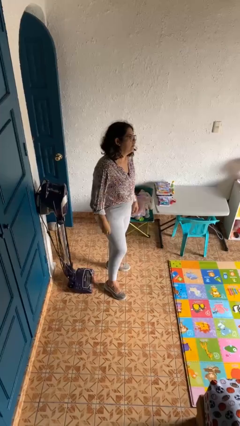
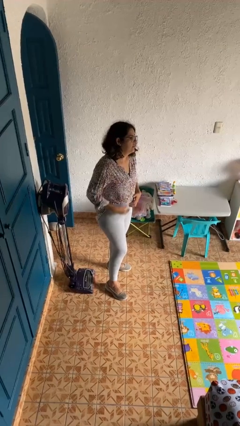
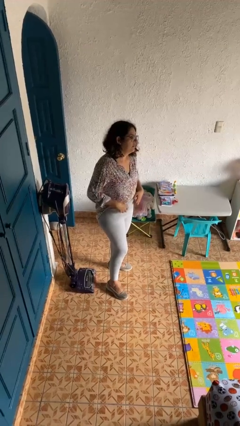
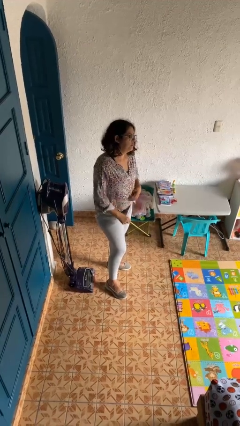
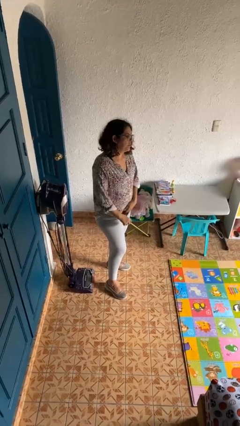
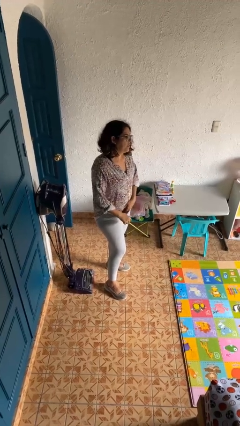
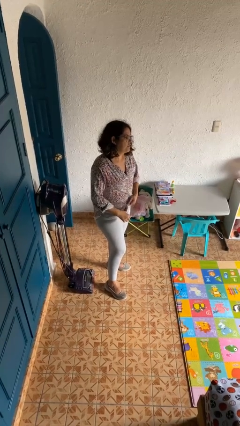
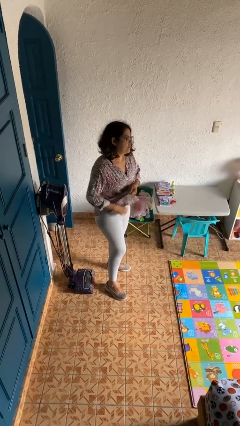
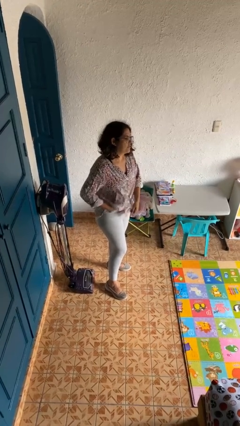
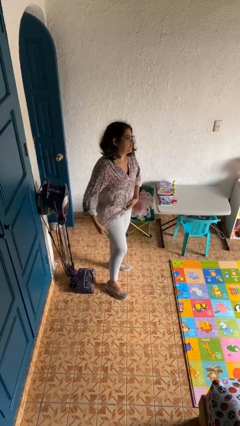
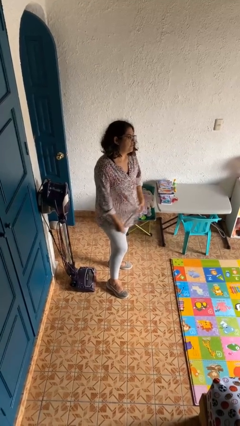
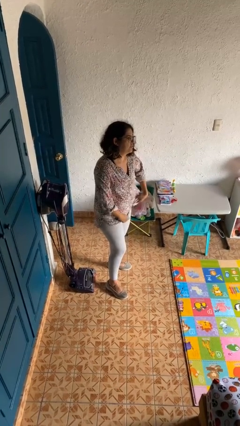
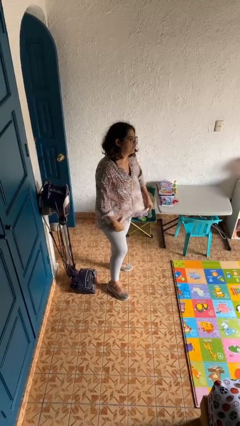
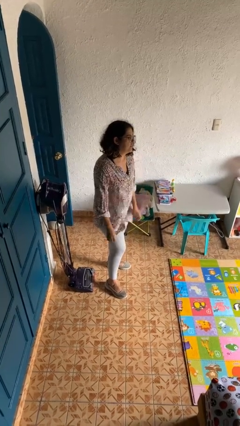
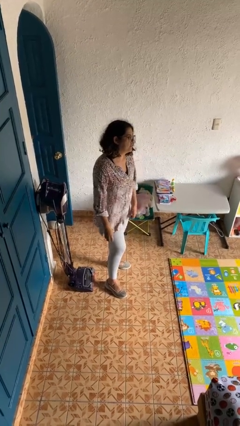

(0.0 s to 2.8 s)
person untucks shirt

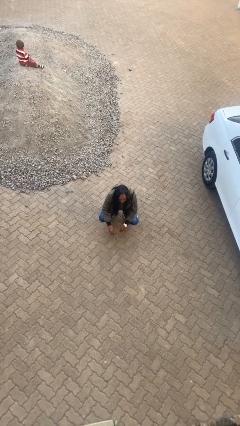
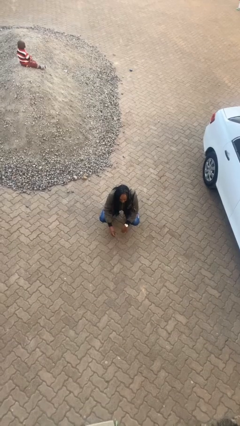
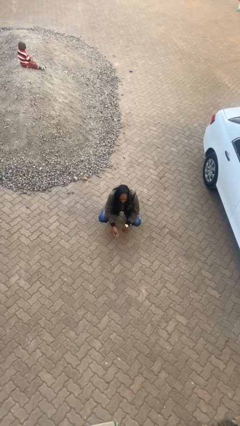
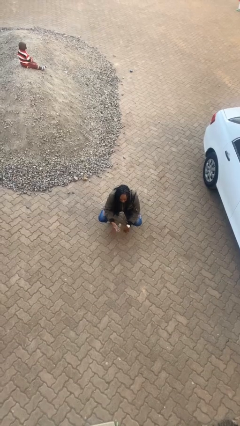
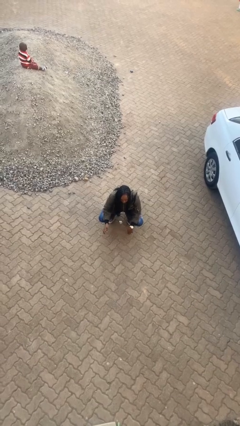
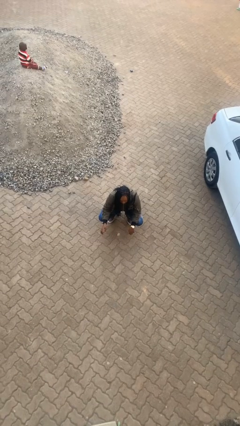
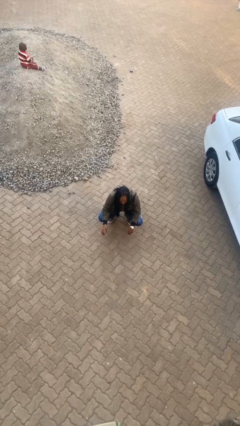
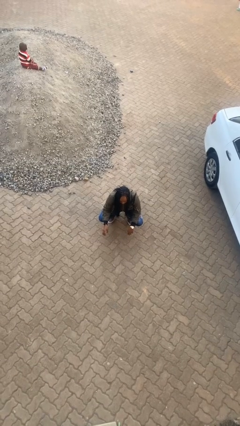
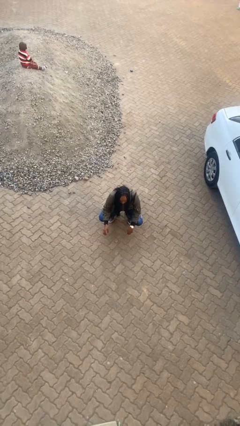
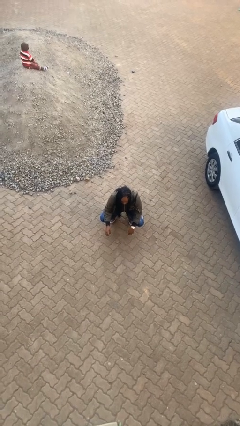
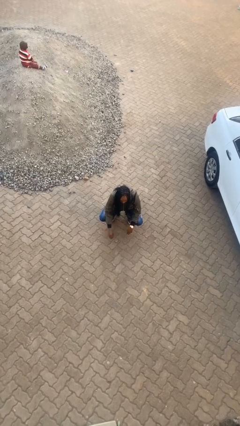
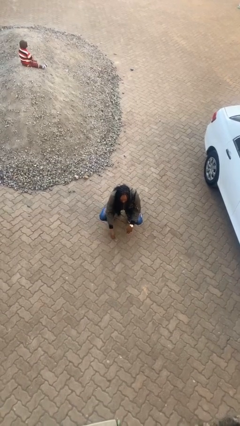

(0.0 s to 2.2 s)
person throws object into air

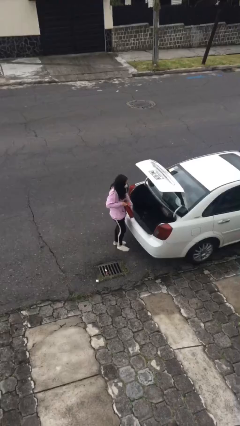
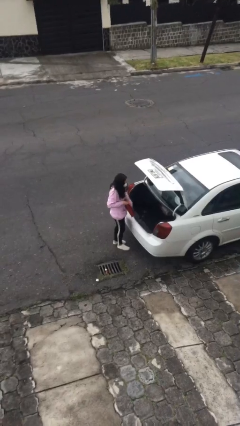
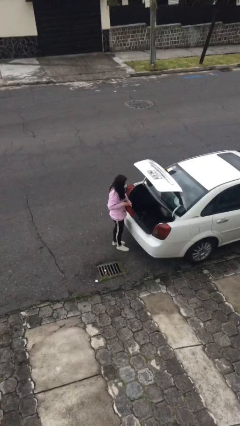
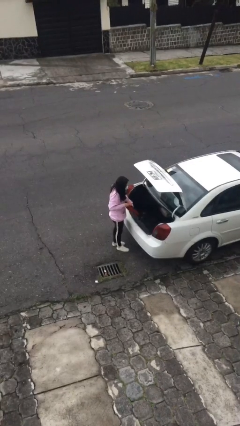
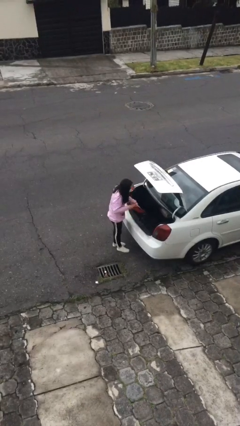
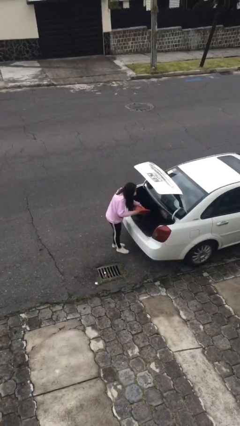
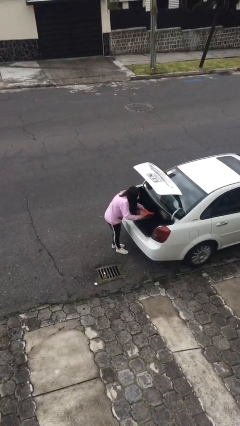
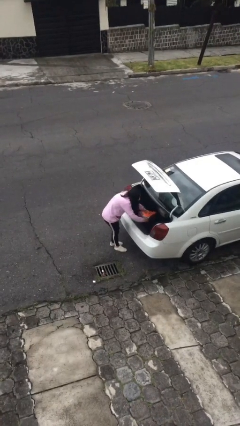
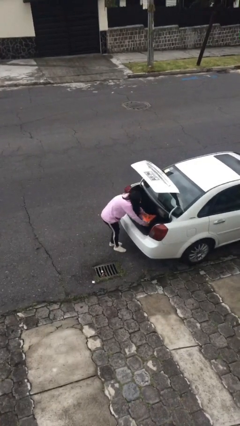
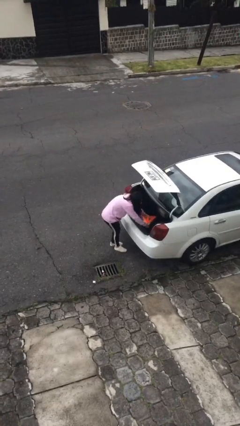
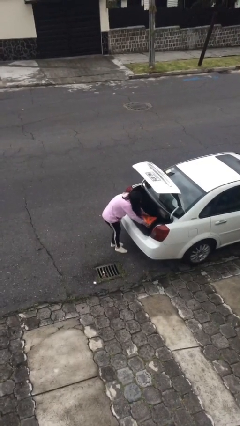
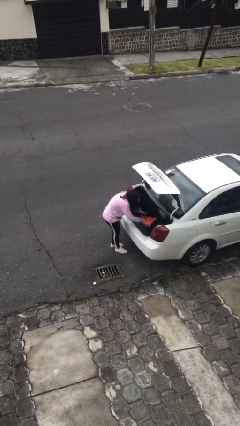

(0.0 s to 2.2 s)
person loads car

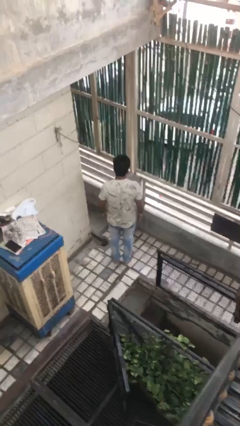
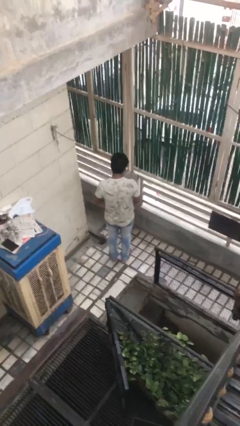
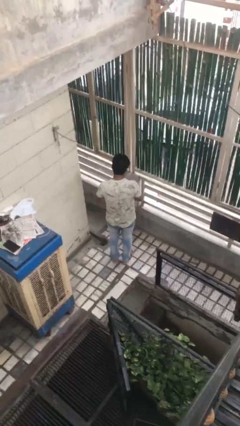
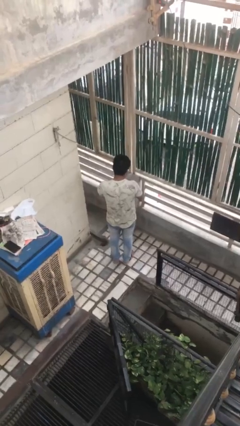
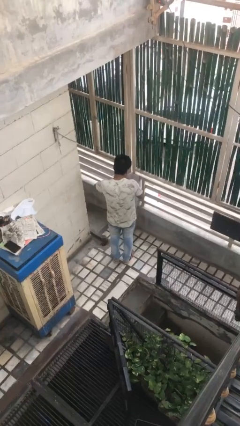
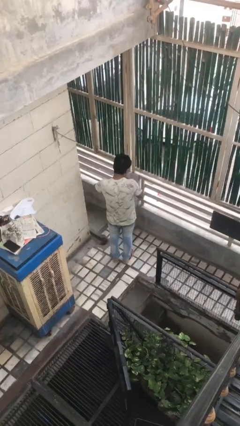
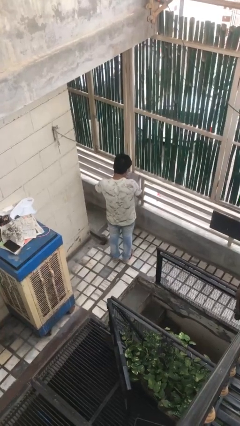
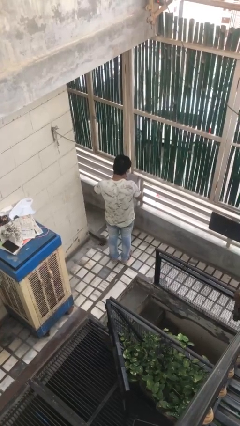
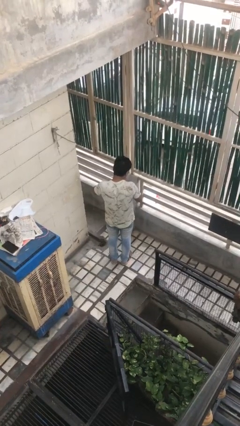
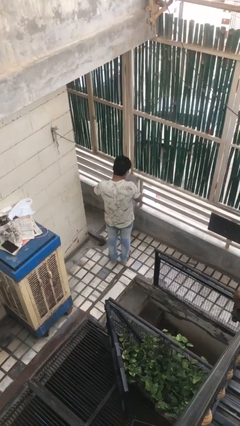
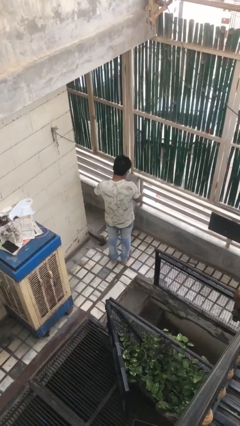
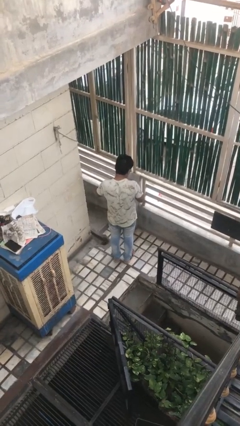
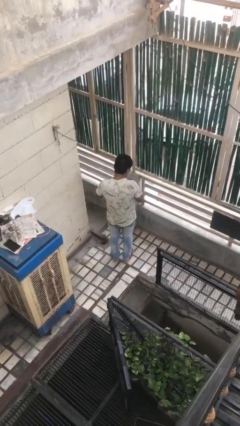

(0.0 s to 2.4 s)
person swats bug

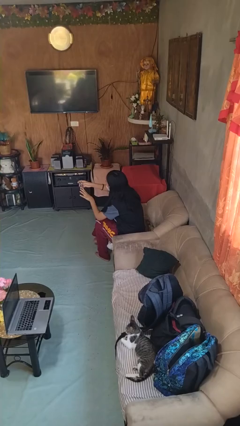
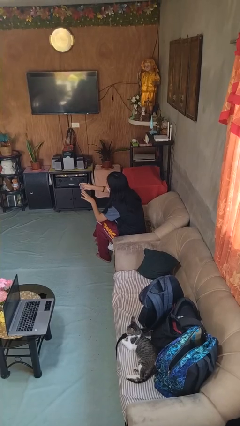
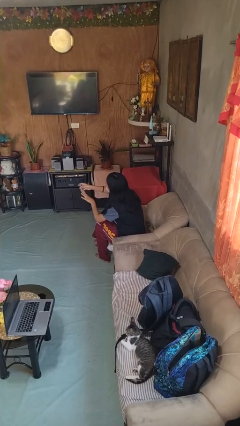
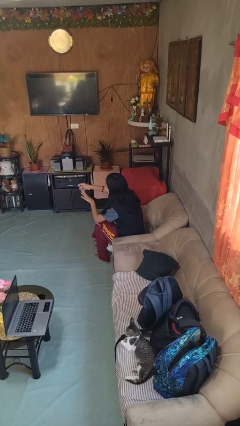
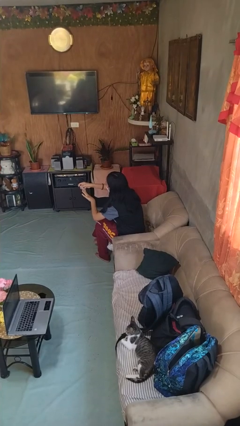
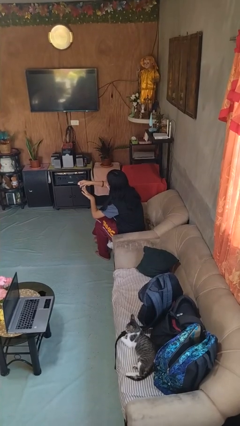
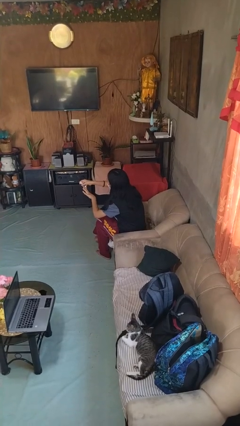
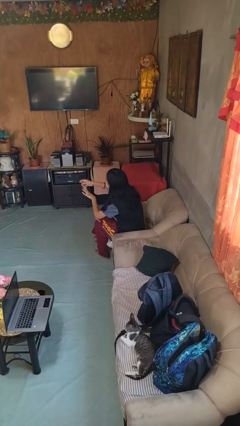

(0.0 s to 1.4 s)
person clips fingernails

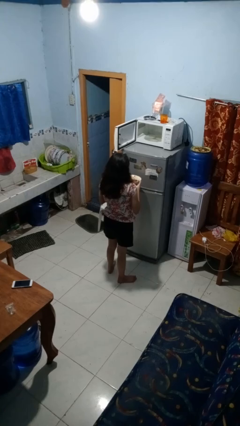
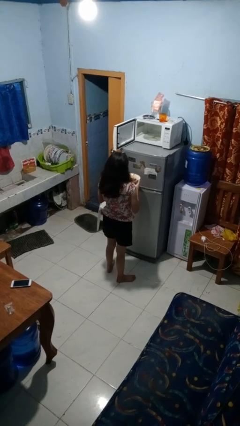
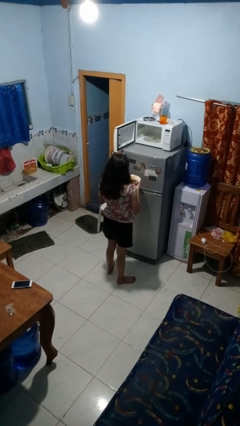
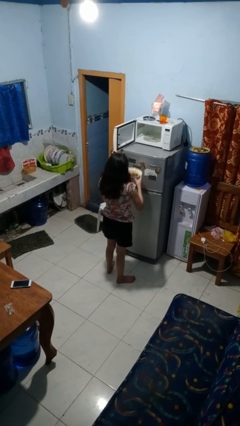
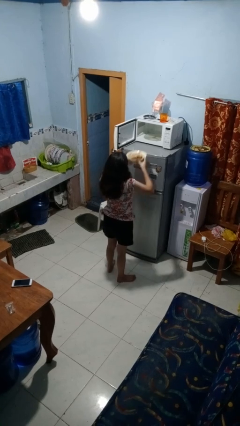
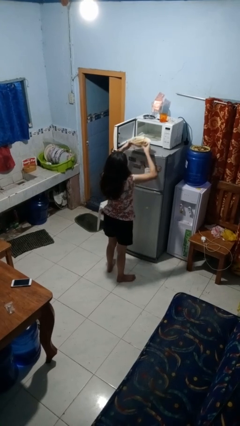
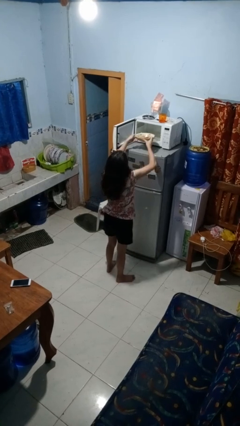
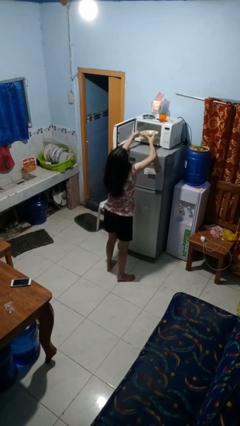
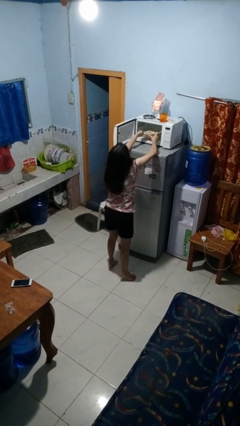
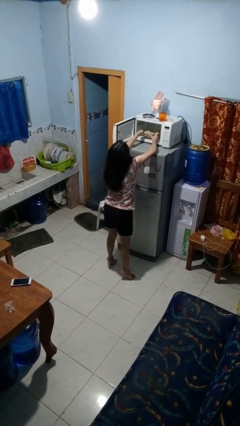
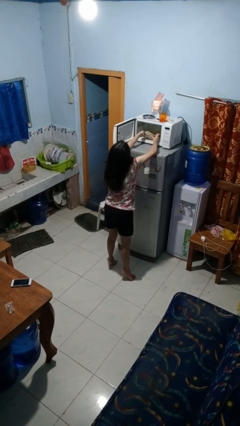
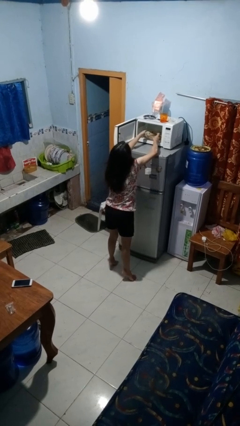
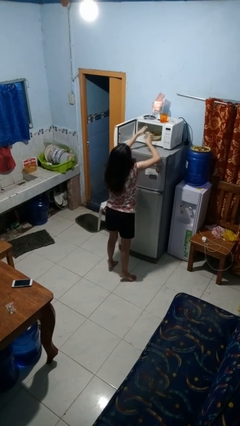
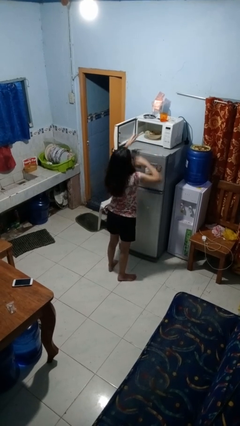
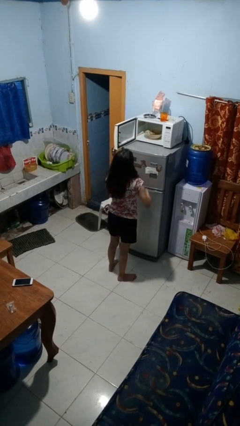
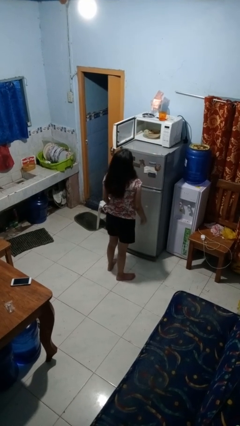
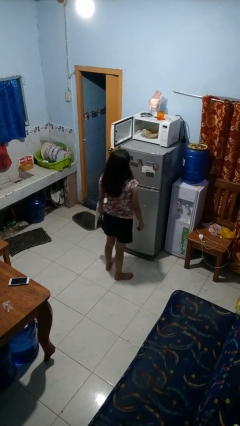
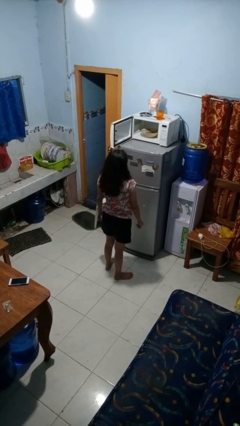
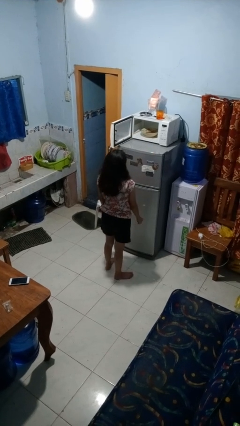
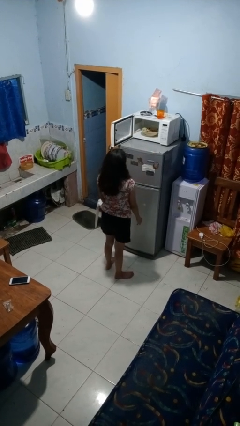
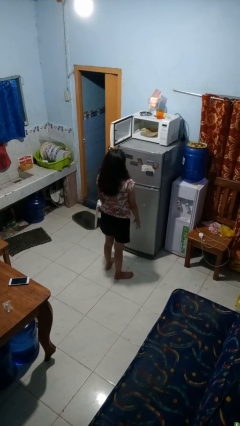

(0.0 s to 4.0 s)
person puts object into microwave

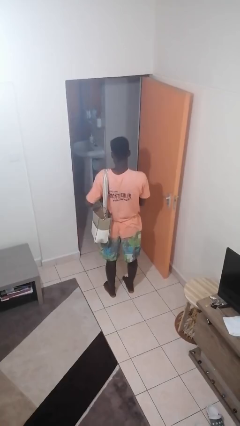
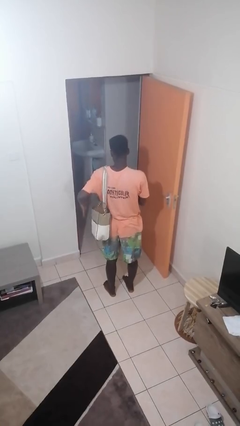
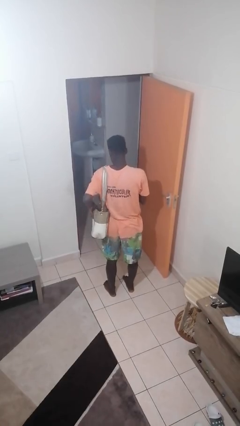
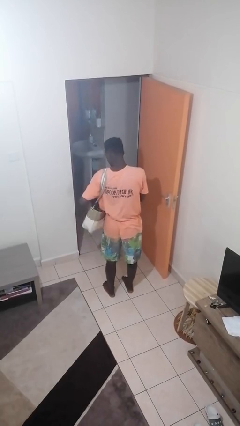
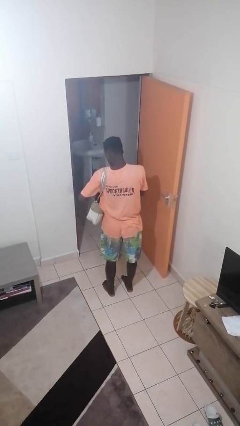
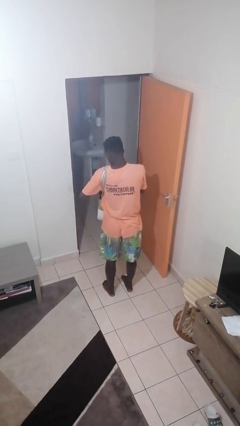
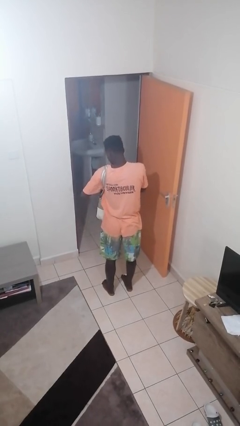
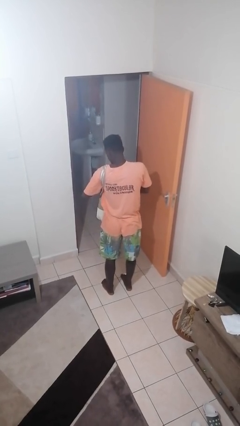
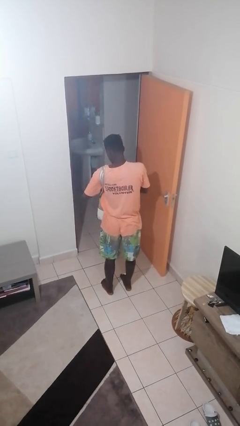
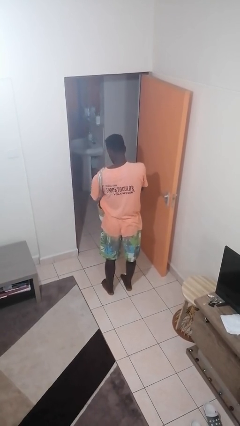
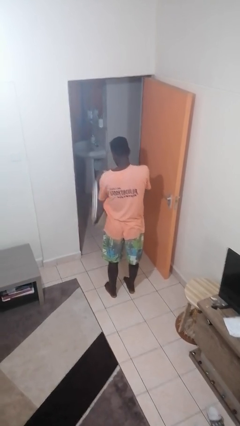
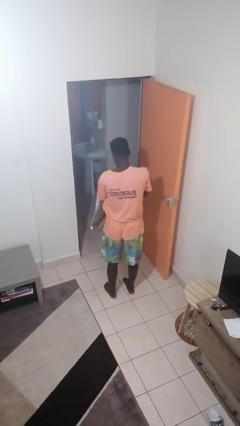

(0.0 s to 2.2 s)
person puts object into purse
